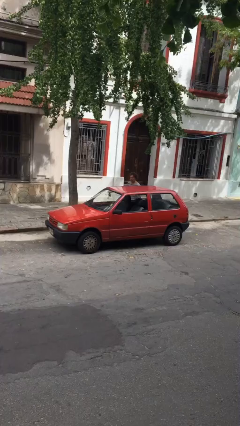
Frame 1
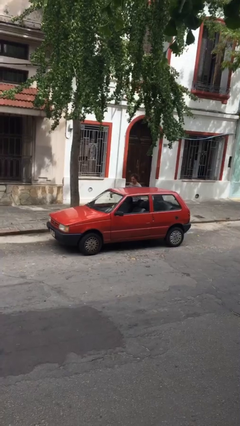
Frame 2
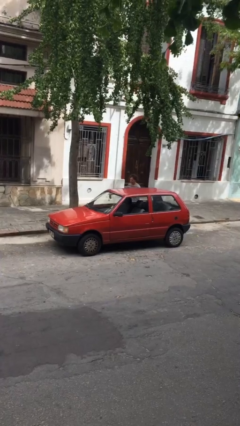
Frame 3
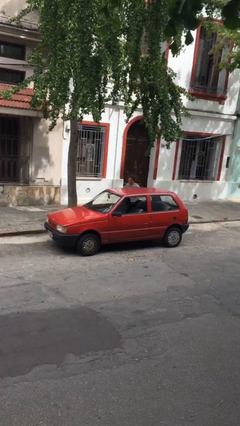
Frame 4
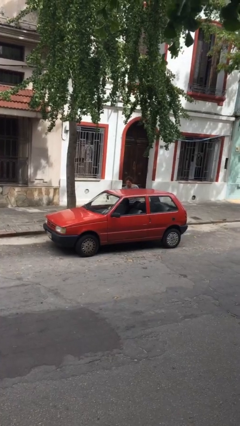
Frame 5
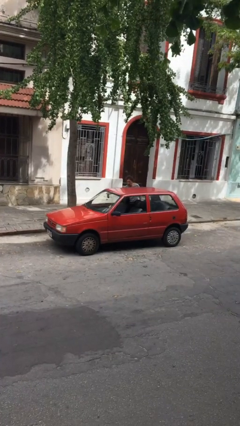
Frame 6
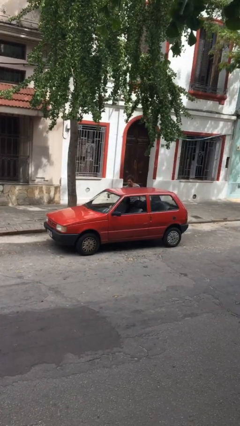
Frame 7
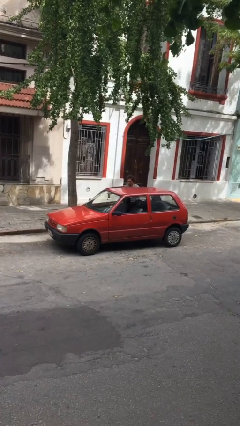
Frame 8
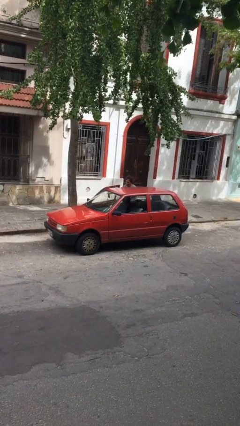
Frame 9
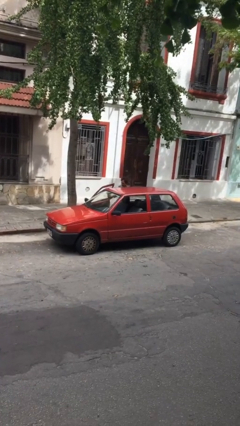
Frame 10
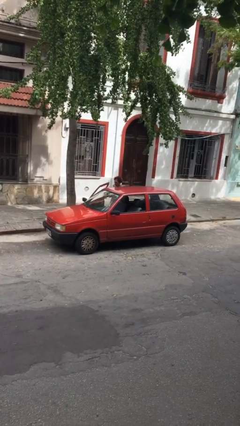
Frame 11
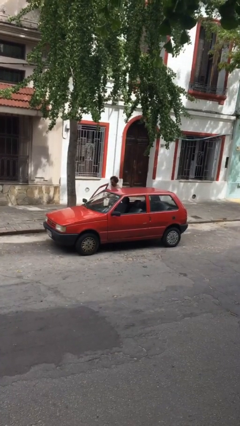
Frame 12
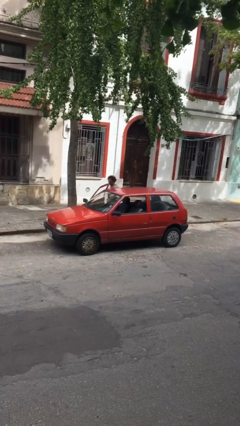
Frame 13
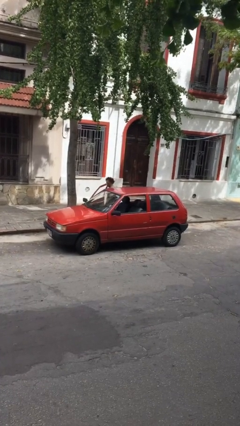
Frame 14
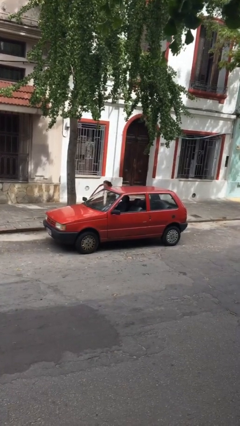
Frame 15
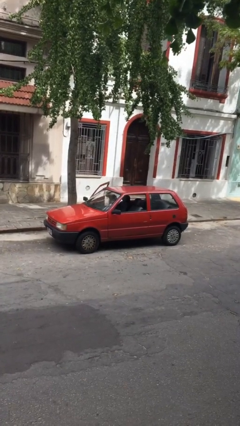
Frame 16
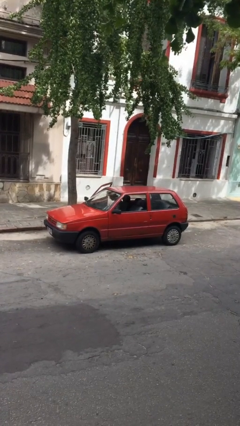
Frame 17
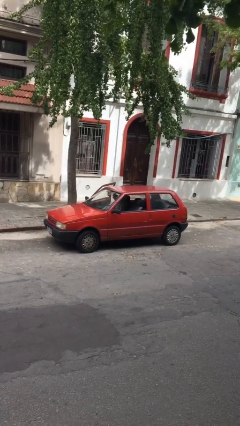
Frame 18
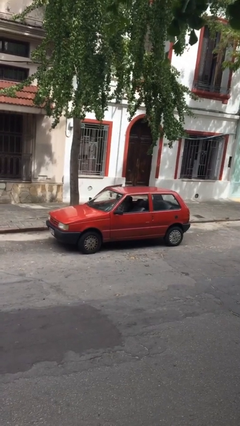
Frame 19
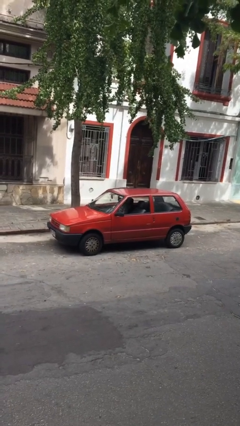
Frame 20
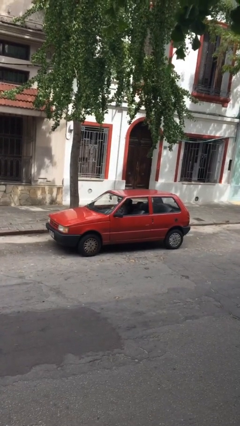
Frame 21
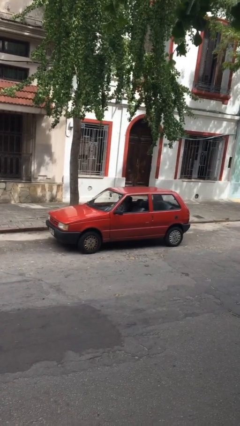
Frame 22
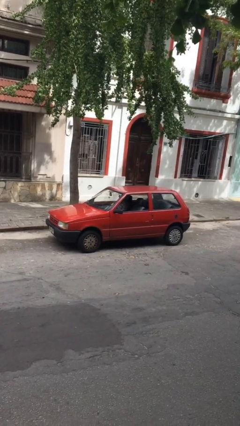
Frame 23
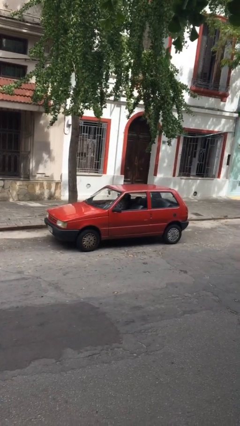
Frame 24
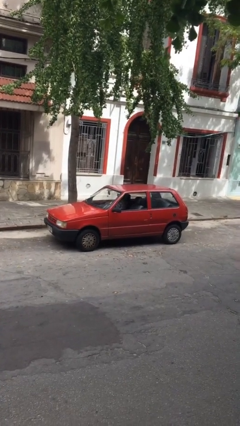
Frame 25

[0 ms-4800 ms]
car picks up person

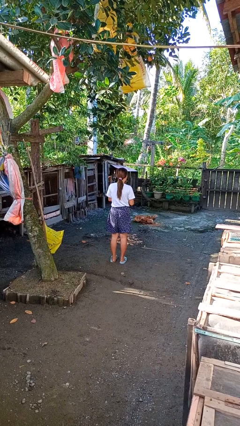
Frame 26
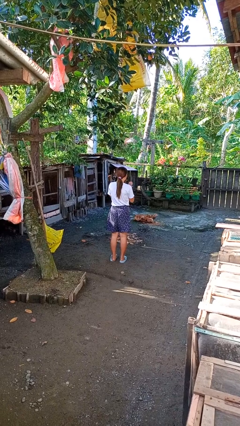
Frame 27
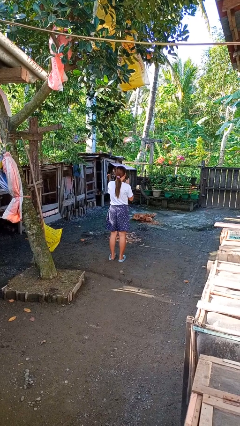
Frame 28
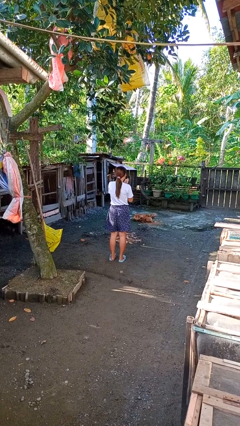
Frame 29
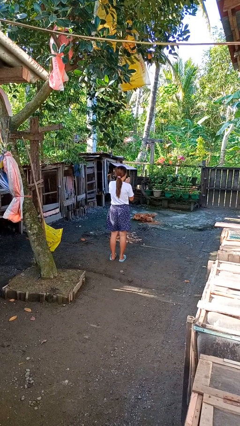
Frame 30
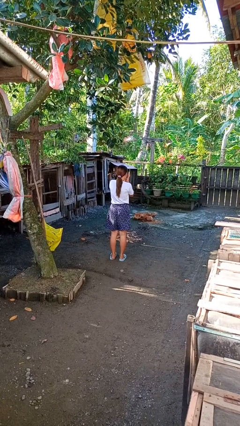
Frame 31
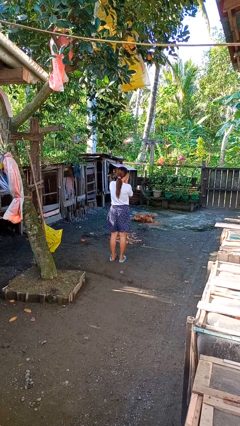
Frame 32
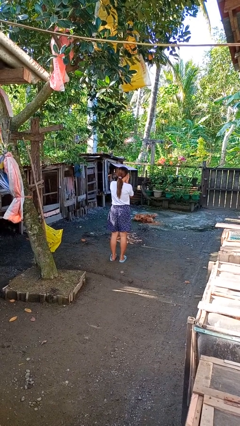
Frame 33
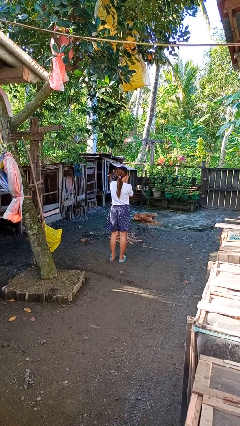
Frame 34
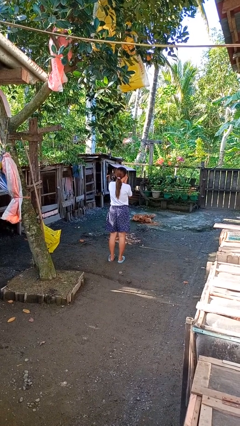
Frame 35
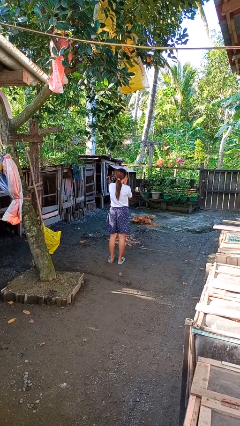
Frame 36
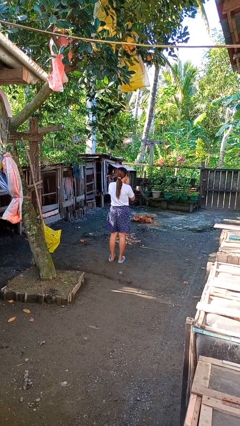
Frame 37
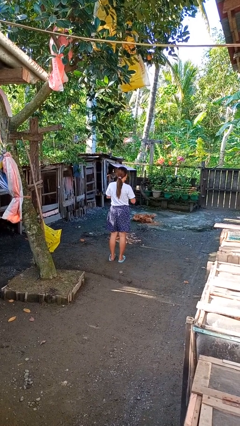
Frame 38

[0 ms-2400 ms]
person blows into hands

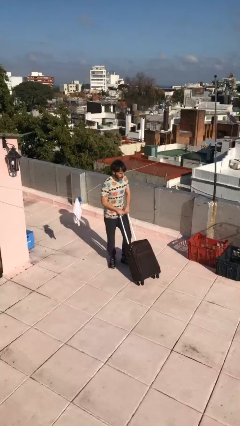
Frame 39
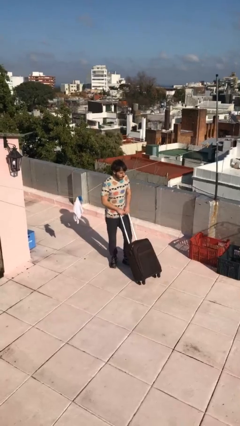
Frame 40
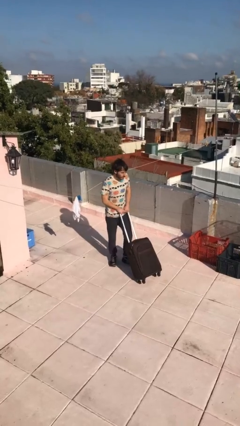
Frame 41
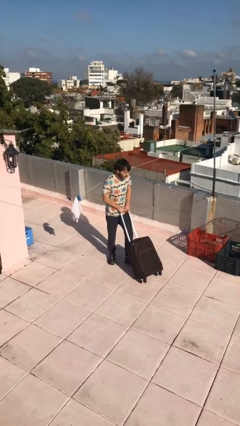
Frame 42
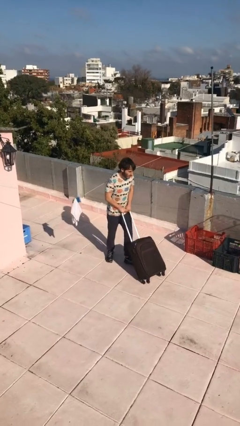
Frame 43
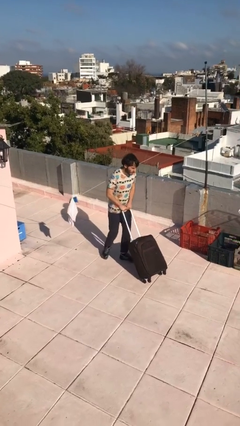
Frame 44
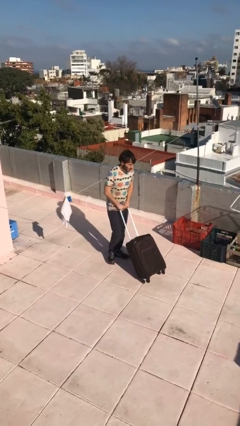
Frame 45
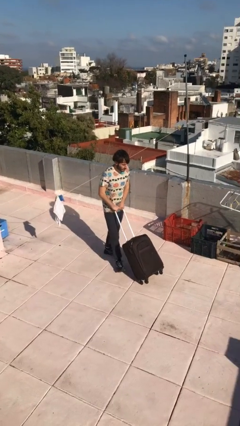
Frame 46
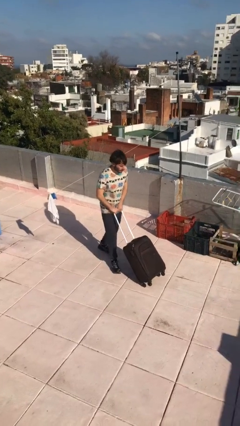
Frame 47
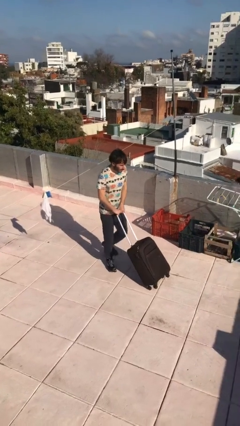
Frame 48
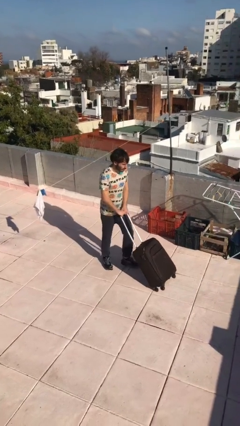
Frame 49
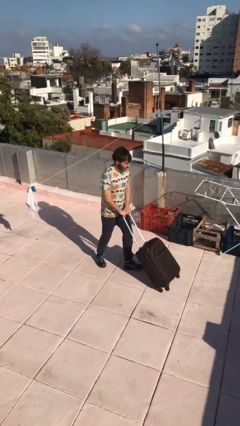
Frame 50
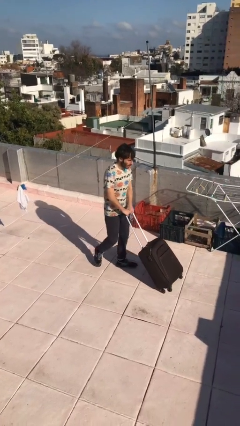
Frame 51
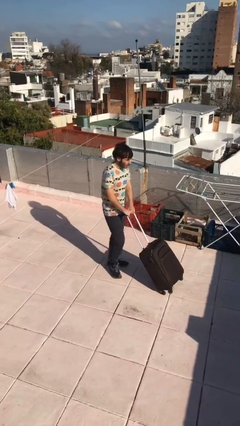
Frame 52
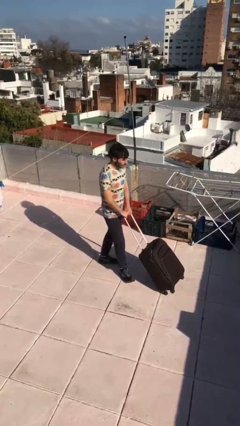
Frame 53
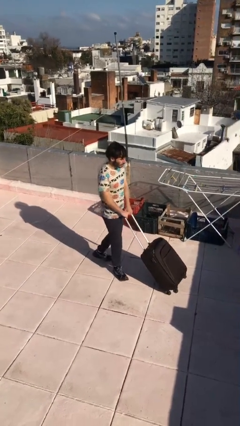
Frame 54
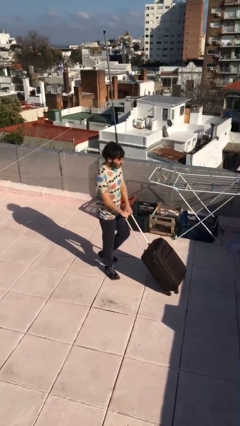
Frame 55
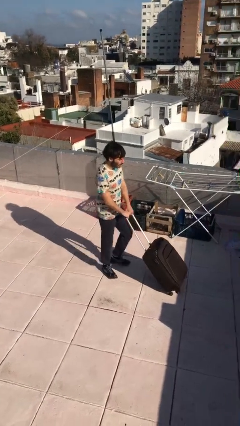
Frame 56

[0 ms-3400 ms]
person pushes wheeled cart

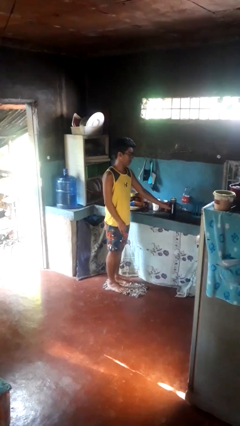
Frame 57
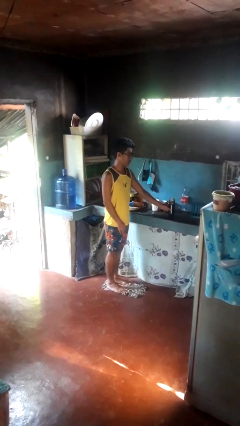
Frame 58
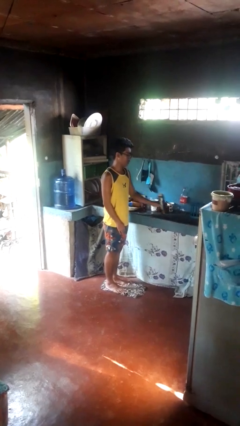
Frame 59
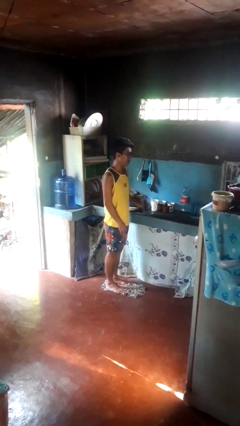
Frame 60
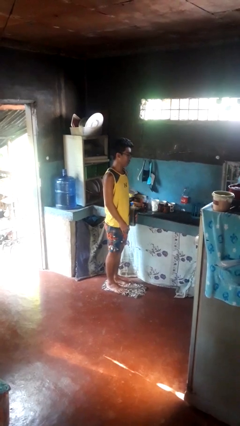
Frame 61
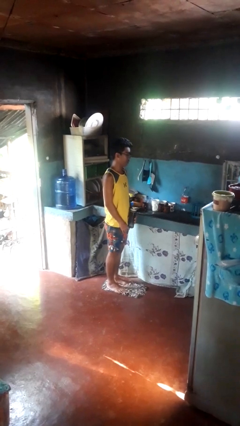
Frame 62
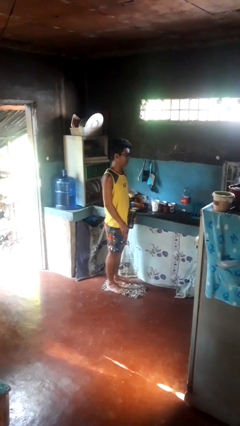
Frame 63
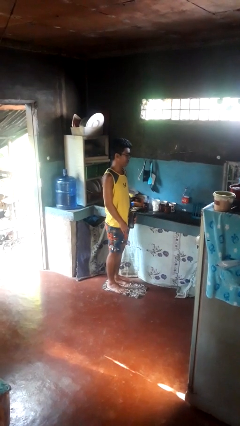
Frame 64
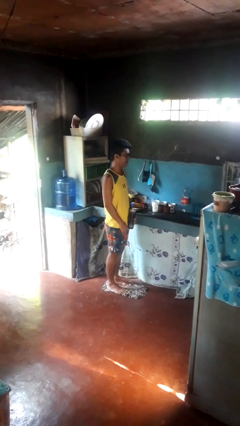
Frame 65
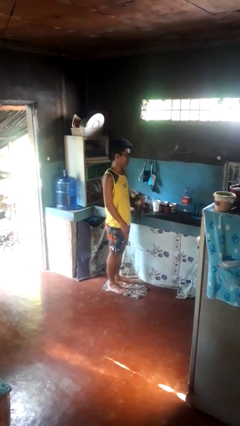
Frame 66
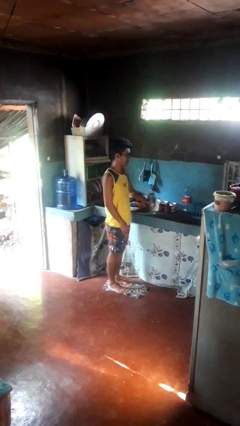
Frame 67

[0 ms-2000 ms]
person picks up object from countertop

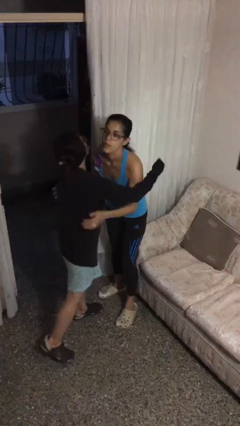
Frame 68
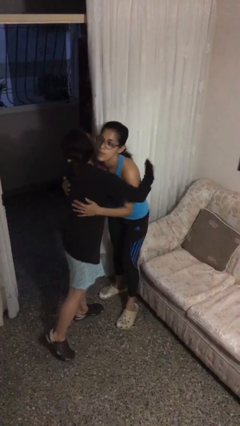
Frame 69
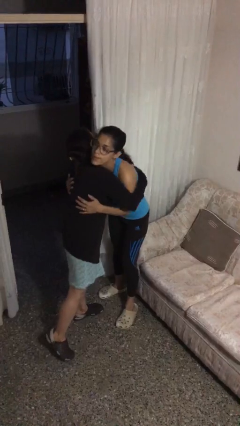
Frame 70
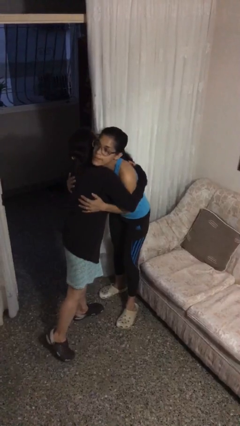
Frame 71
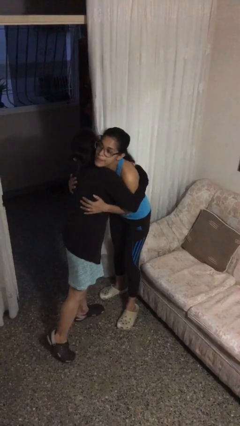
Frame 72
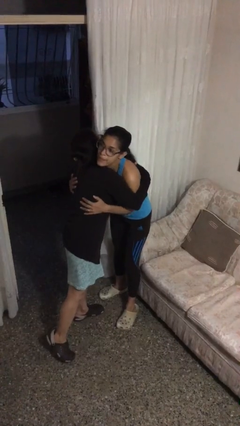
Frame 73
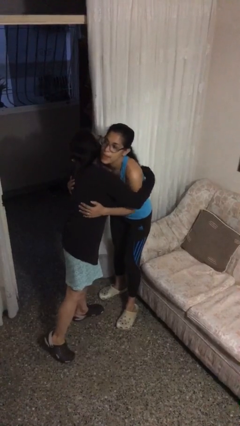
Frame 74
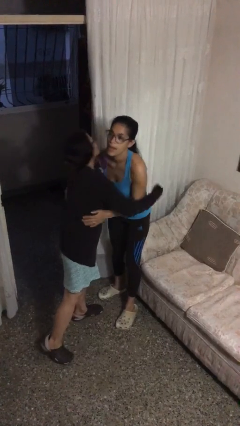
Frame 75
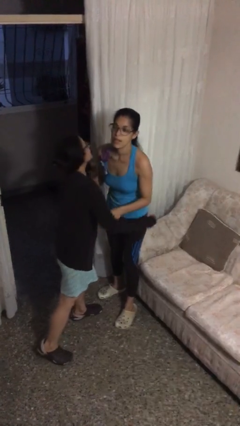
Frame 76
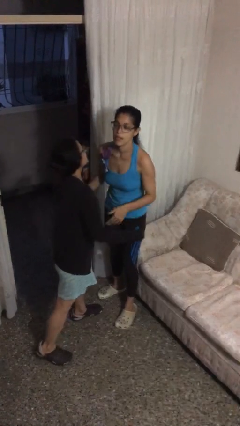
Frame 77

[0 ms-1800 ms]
person embraces person

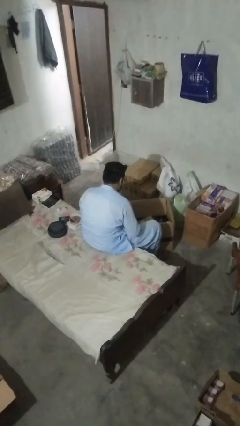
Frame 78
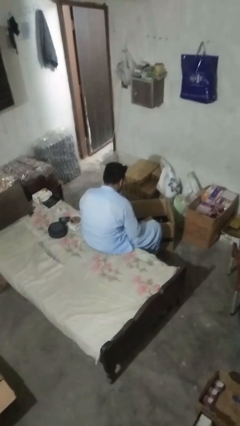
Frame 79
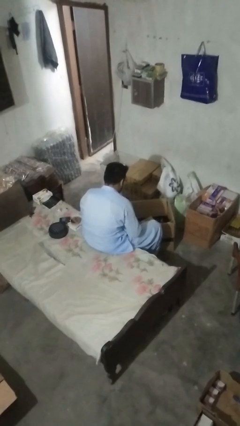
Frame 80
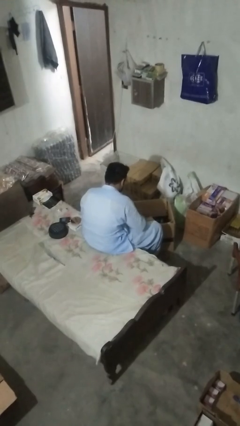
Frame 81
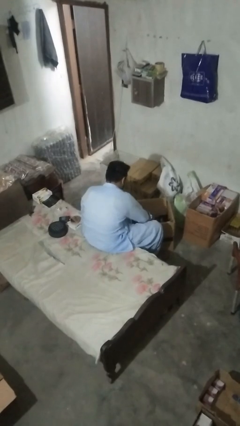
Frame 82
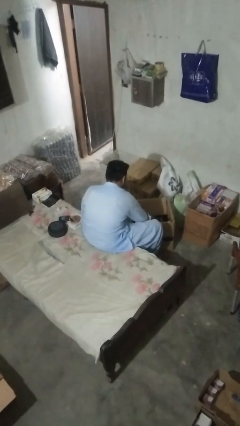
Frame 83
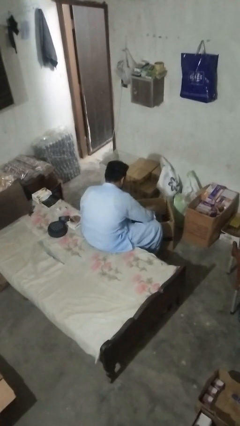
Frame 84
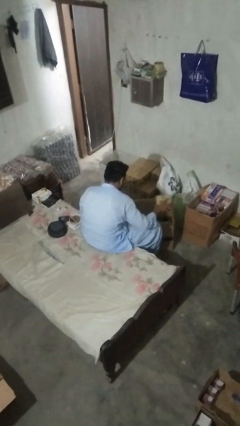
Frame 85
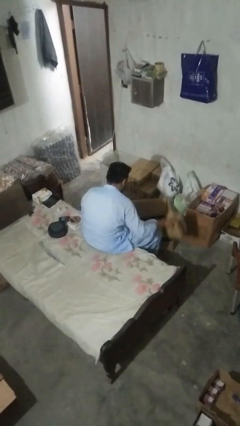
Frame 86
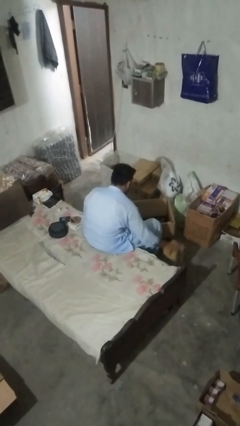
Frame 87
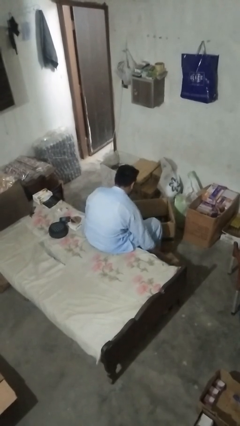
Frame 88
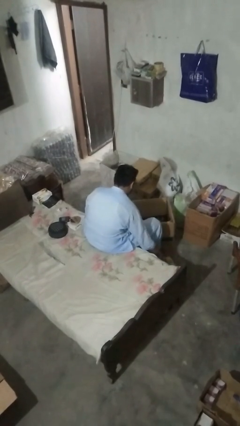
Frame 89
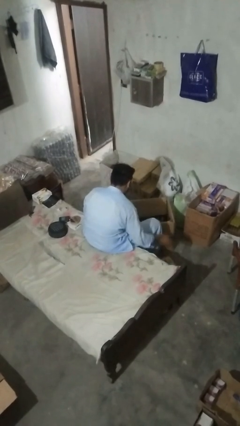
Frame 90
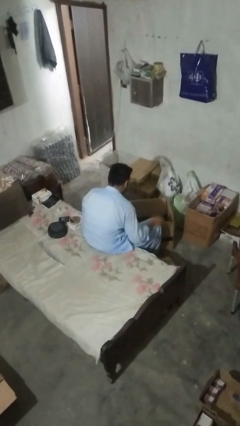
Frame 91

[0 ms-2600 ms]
person takes object from box
